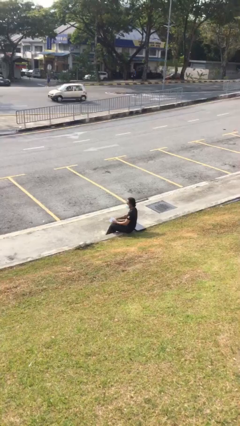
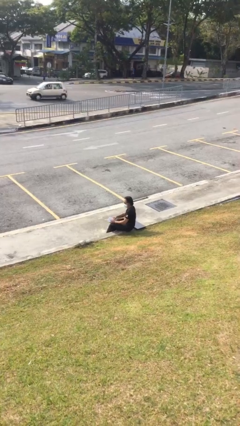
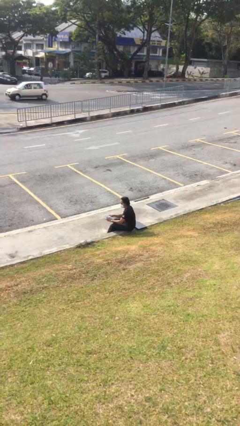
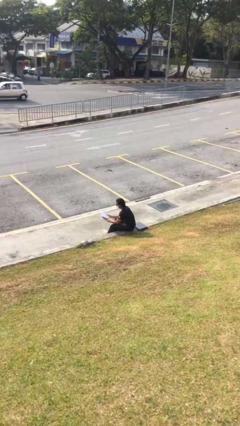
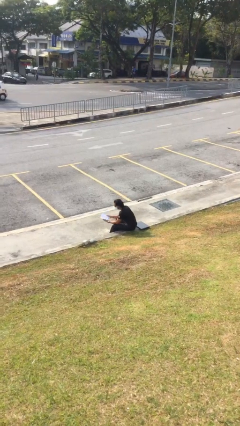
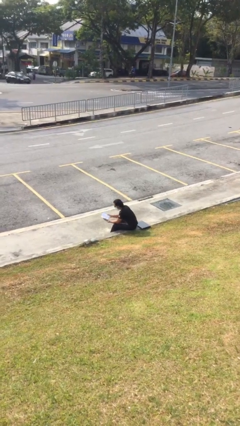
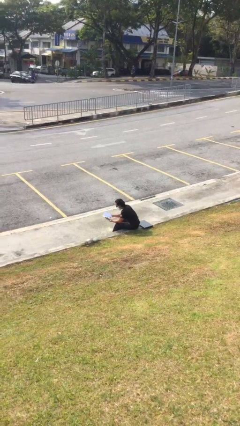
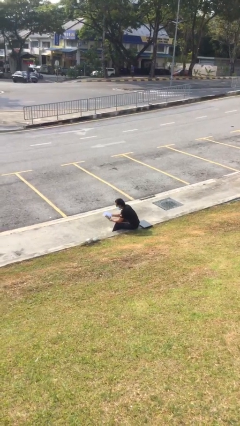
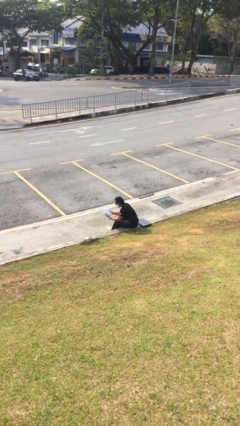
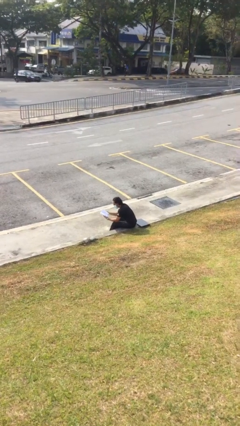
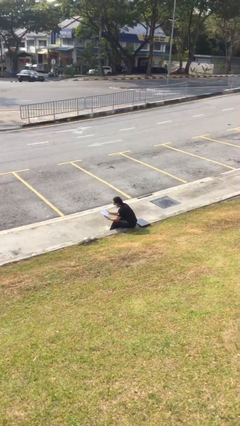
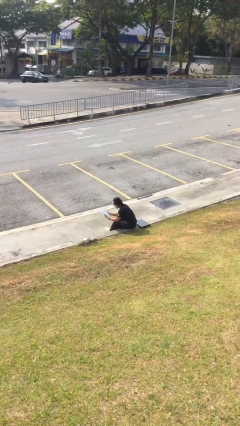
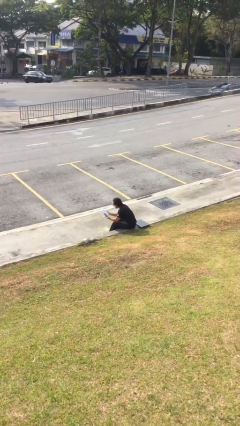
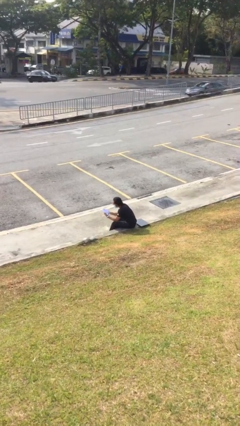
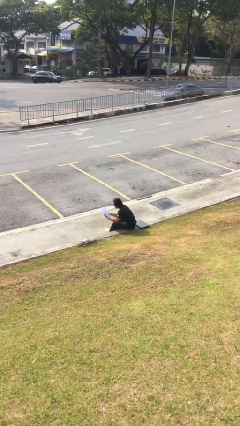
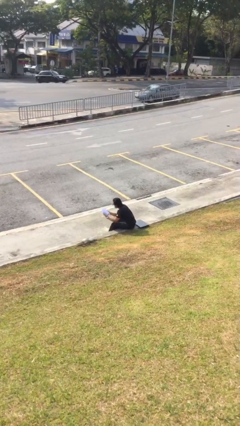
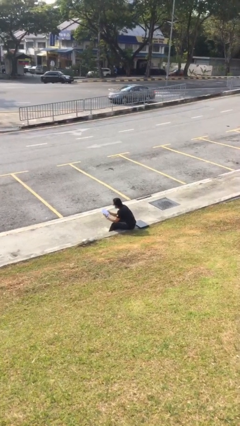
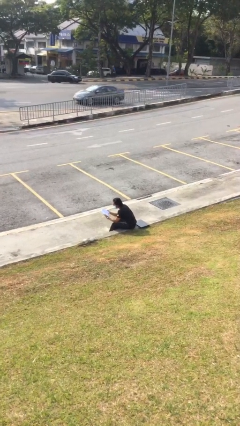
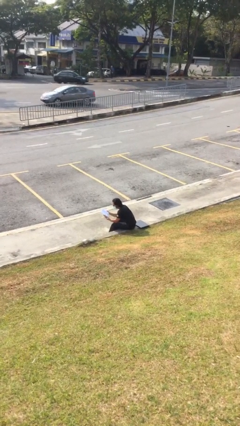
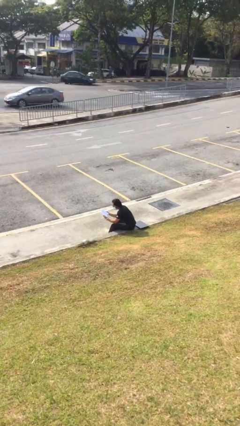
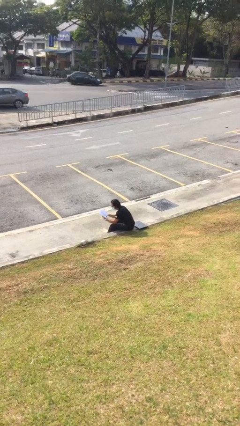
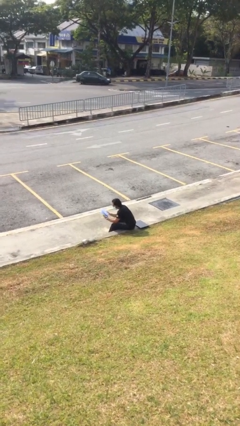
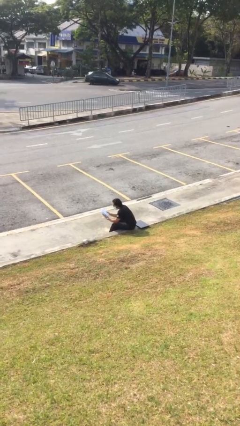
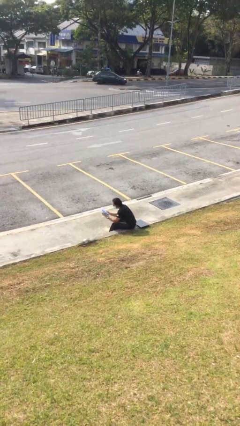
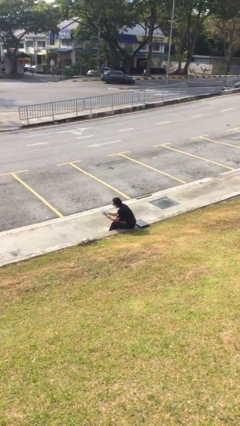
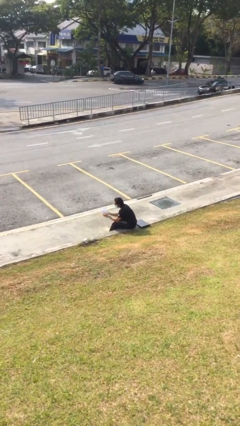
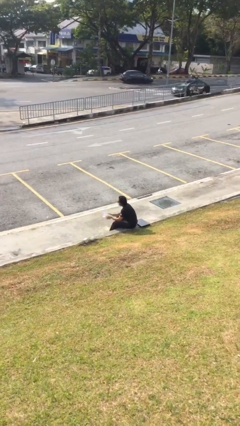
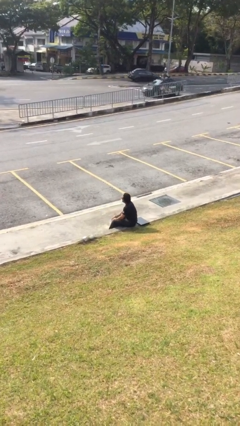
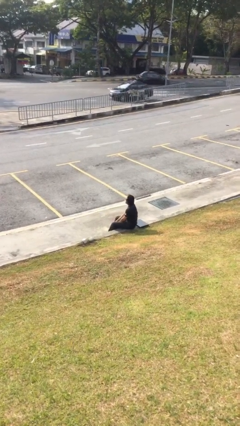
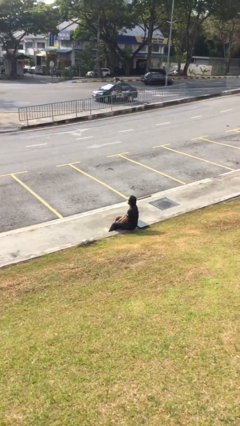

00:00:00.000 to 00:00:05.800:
person reads document

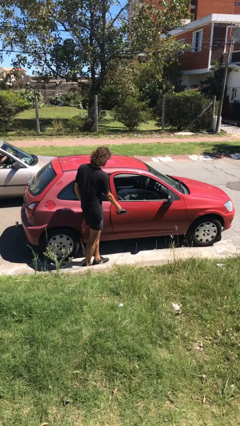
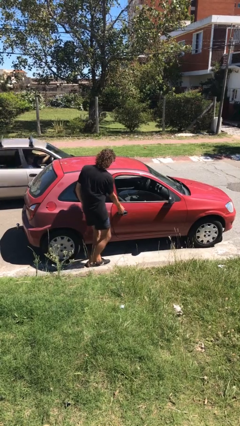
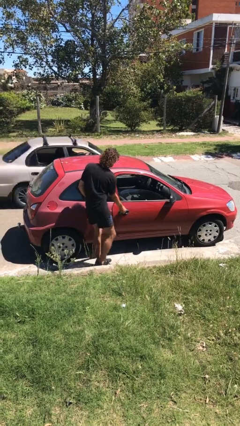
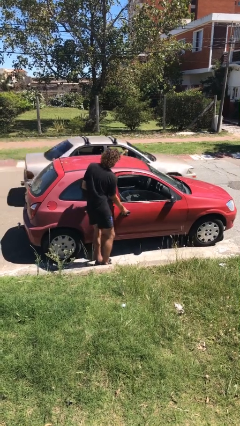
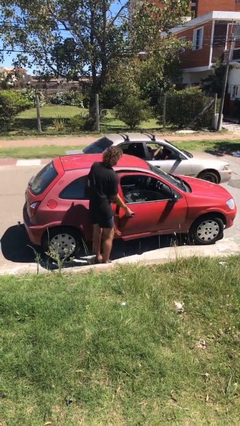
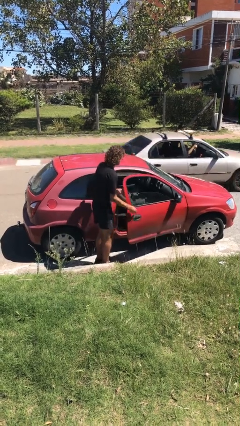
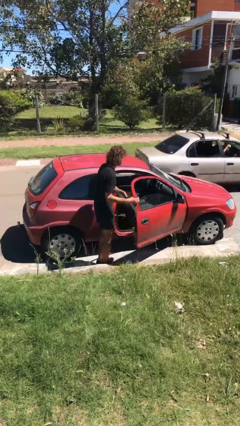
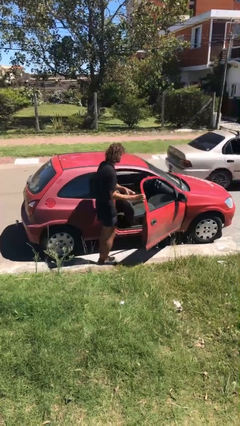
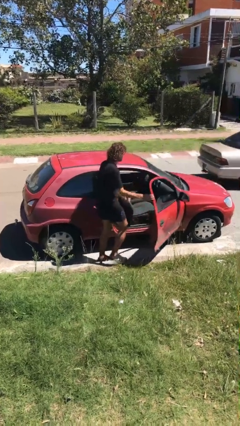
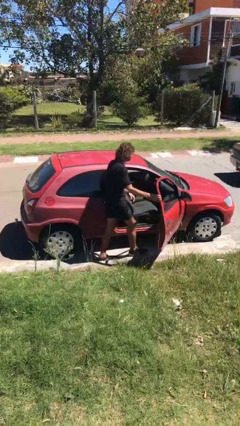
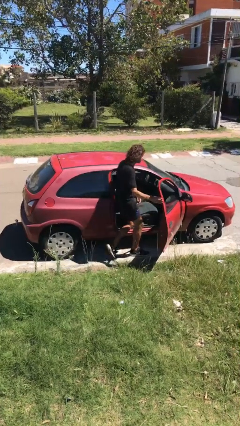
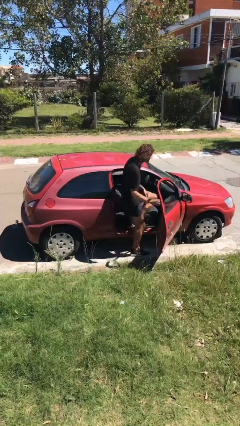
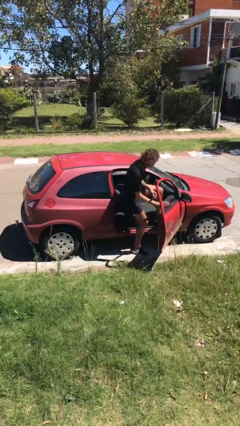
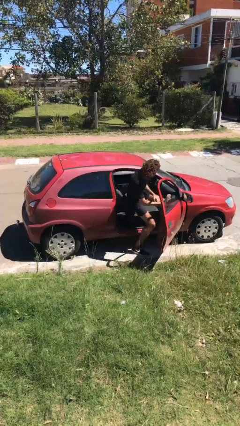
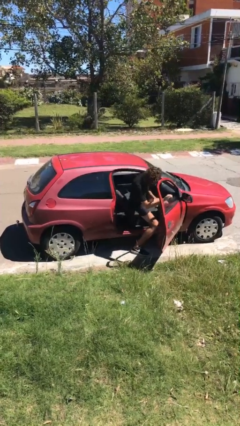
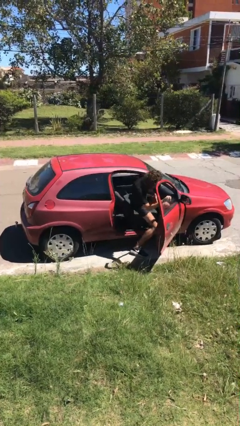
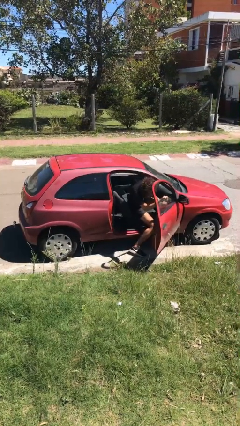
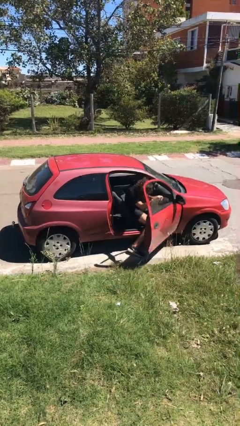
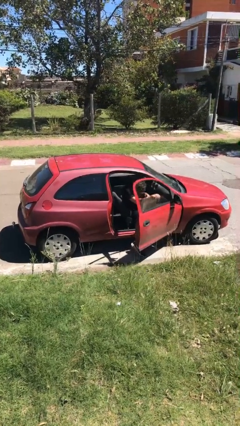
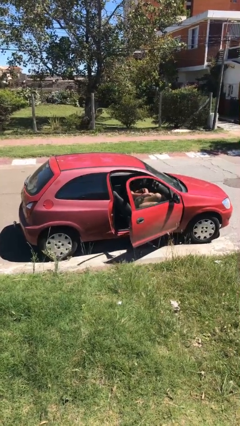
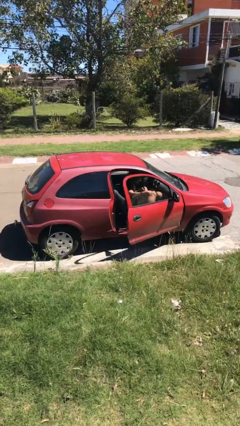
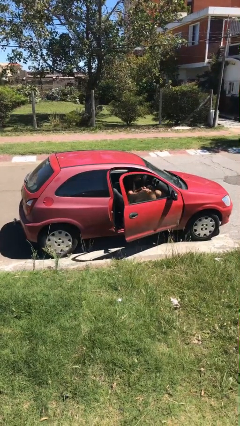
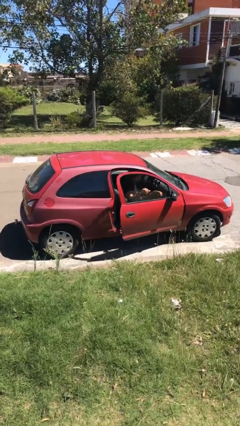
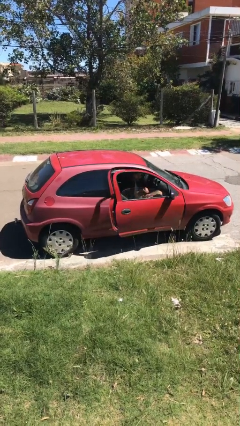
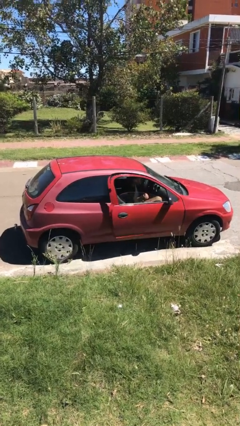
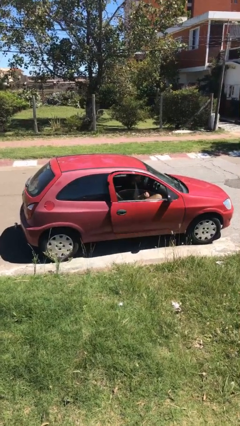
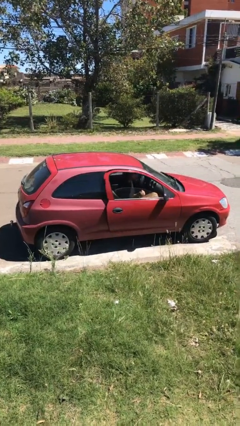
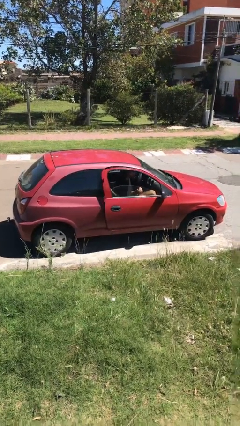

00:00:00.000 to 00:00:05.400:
car picks up person

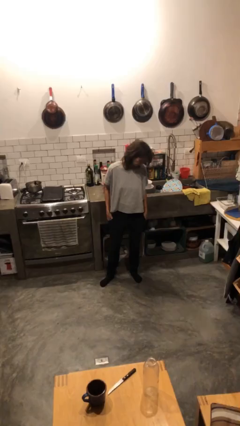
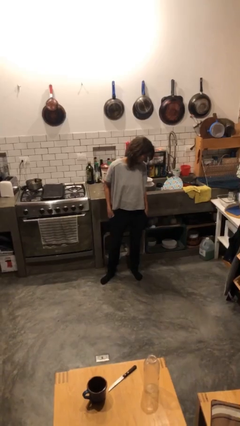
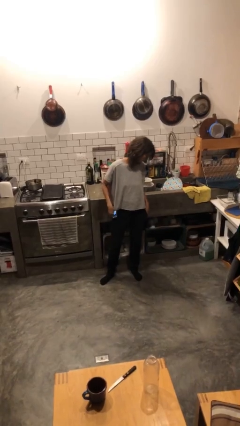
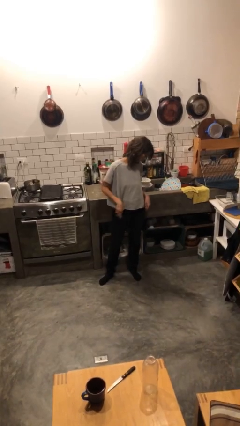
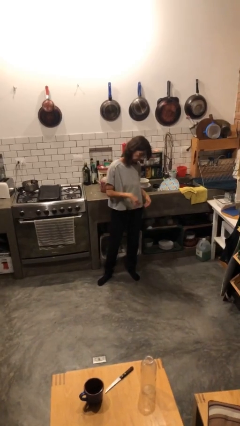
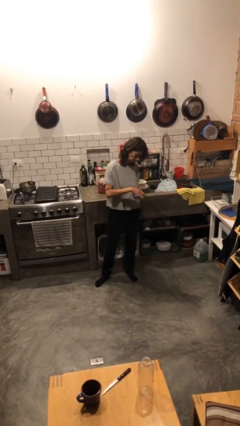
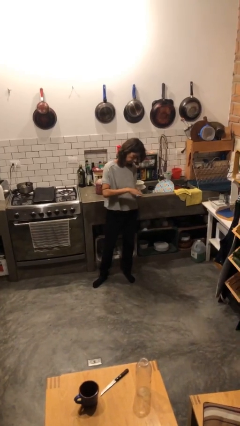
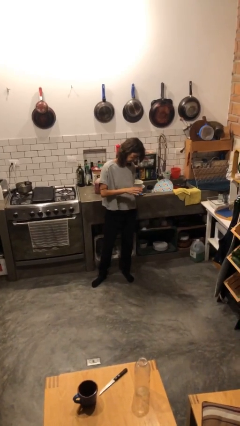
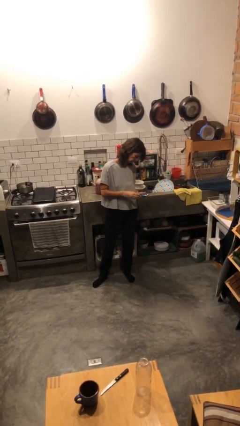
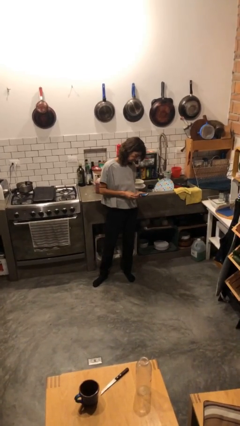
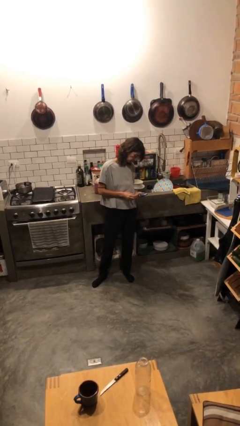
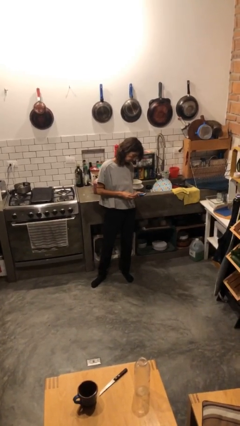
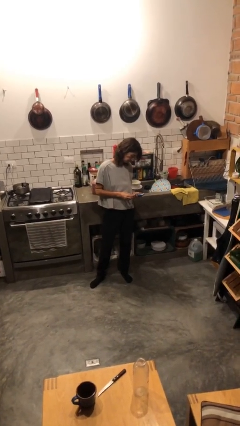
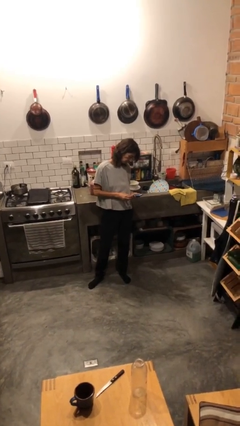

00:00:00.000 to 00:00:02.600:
person takes phone from pocket

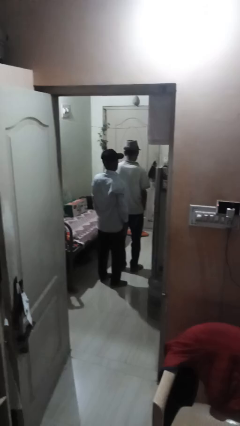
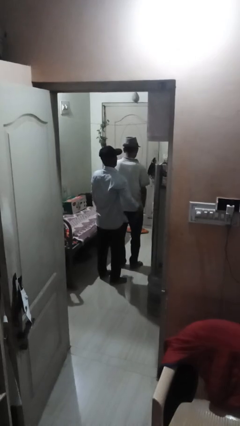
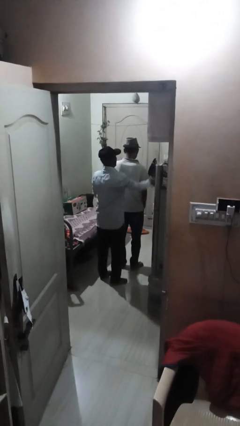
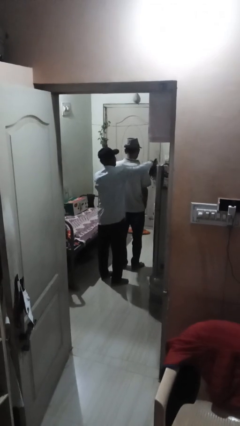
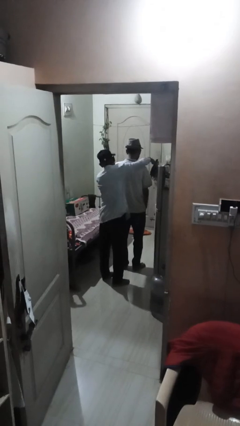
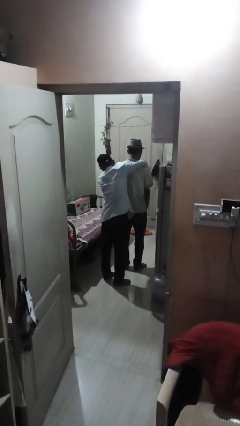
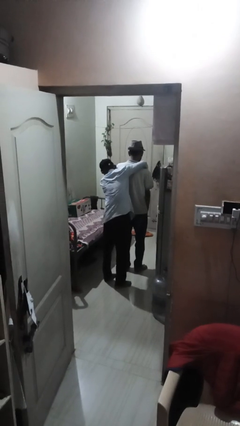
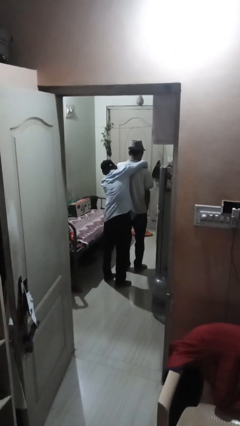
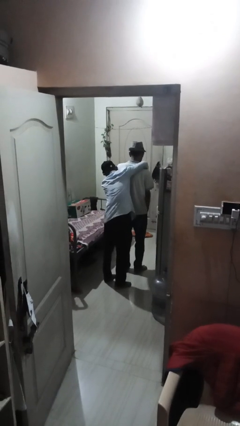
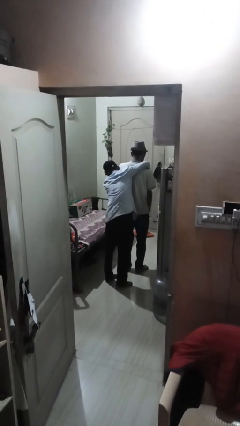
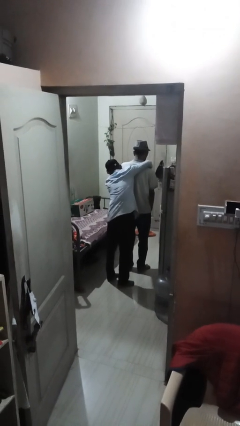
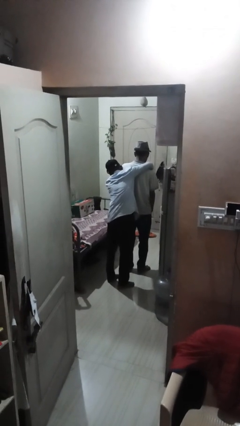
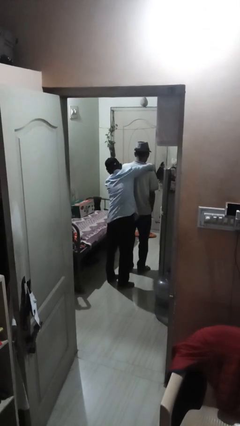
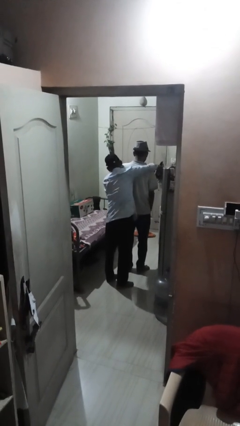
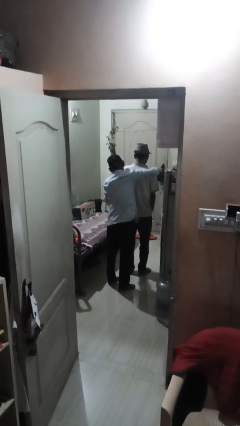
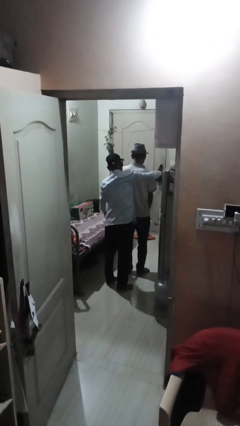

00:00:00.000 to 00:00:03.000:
person hugs person from behind

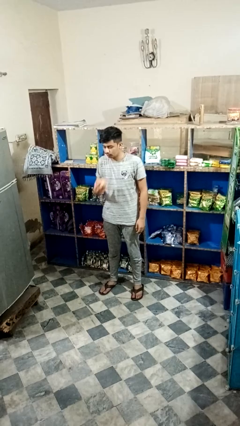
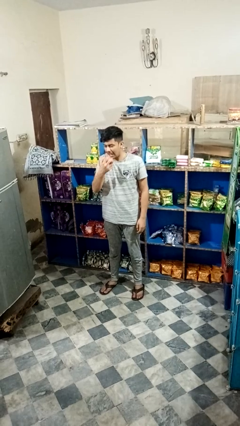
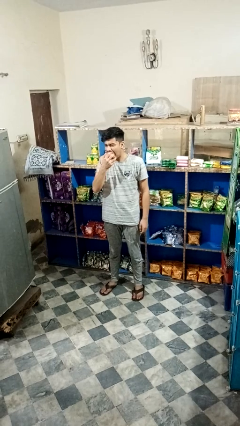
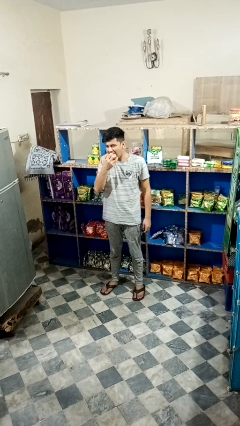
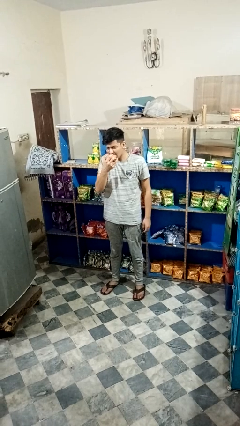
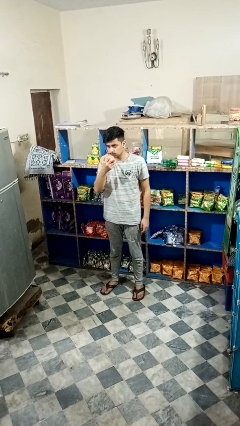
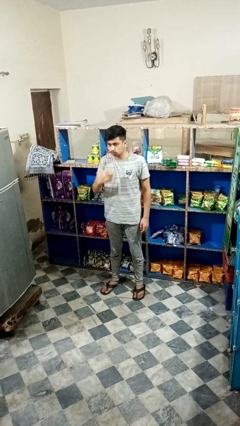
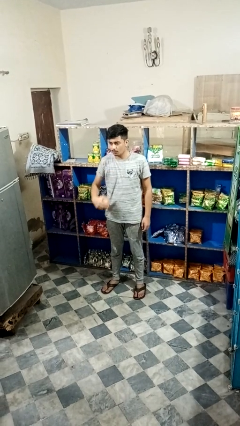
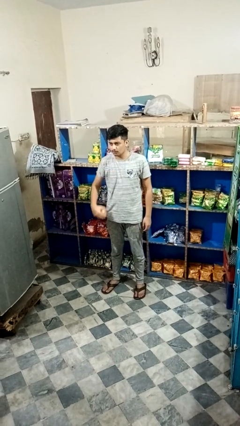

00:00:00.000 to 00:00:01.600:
person eats apple
